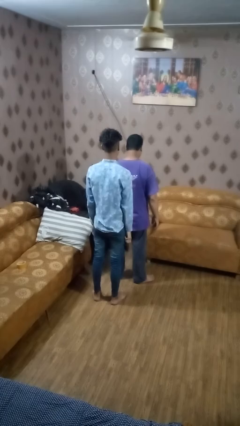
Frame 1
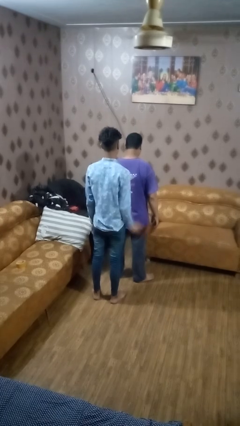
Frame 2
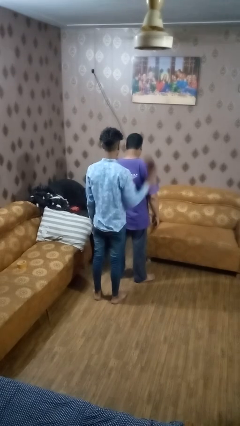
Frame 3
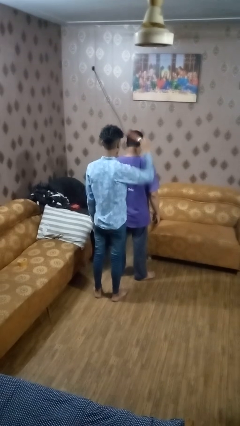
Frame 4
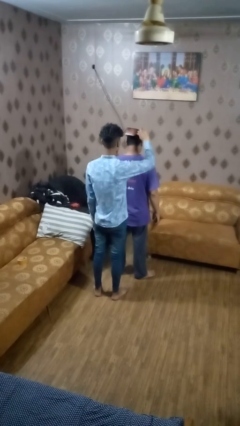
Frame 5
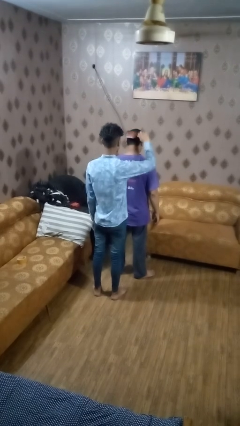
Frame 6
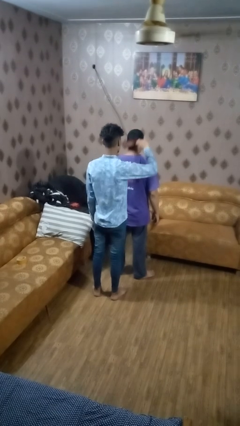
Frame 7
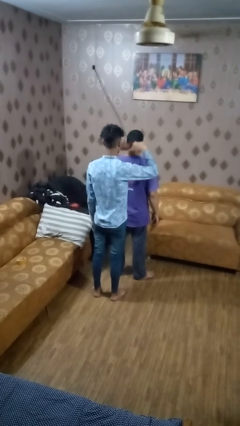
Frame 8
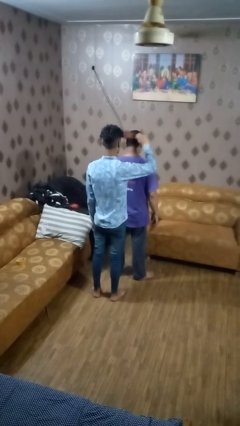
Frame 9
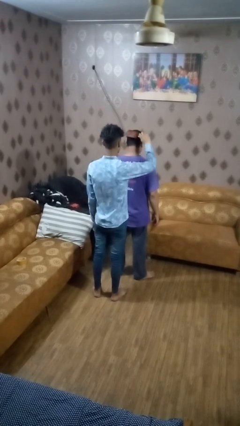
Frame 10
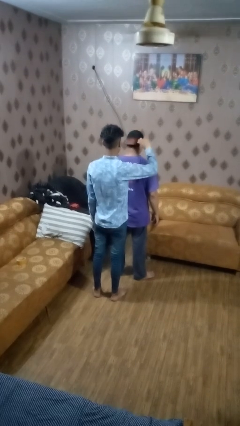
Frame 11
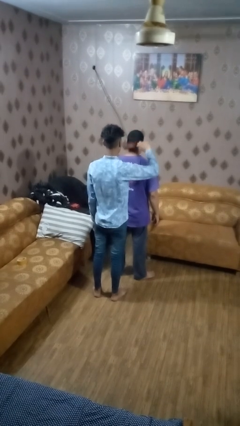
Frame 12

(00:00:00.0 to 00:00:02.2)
person brushes hair of person

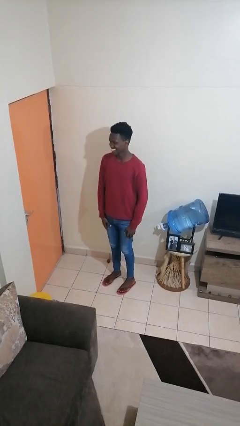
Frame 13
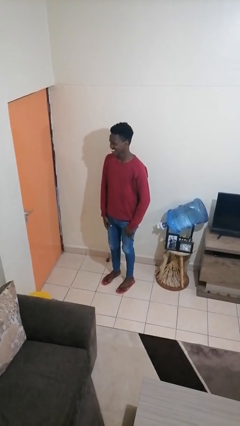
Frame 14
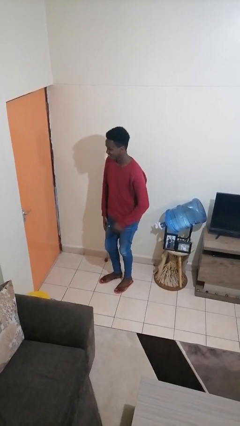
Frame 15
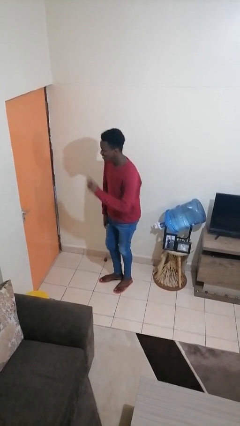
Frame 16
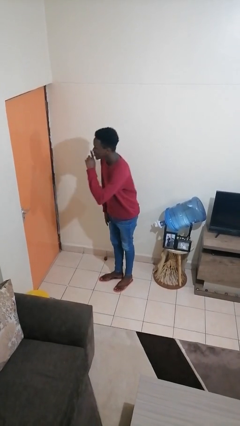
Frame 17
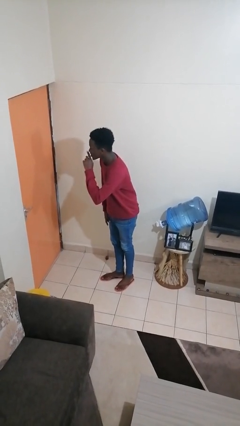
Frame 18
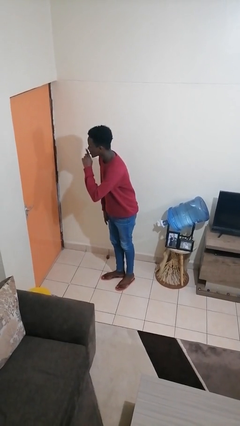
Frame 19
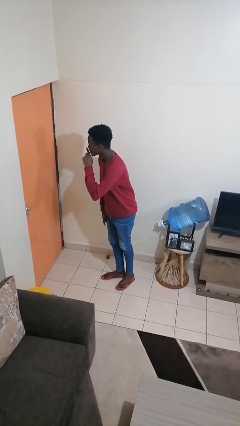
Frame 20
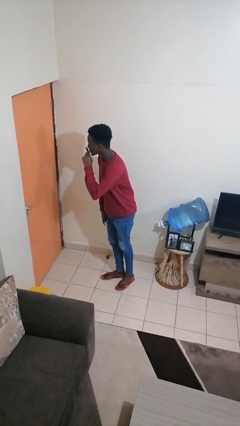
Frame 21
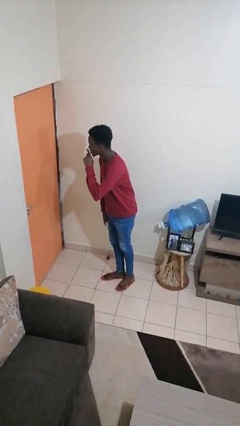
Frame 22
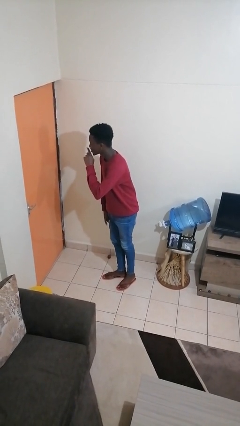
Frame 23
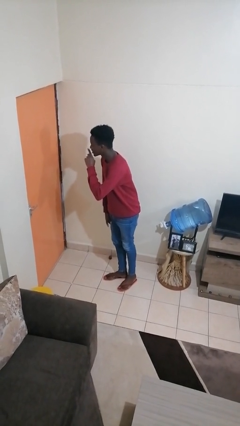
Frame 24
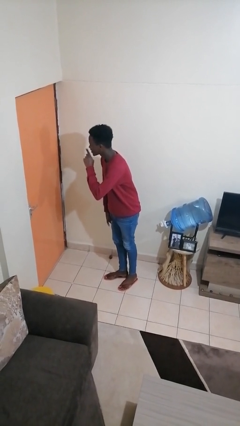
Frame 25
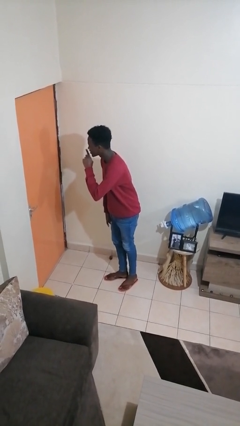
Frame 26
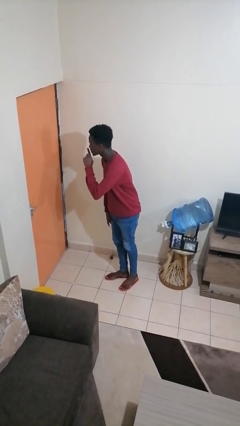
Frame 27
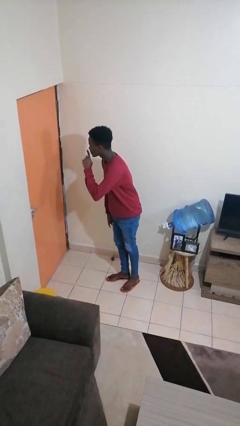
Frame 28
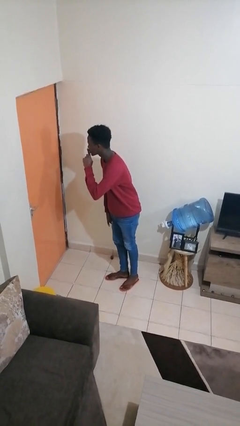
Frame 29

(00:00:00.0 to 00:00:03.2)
person gestures be quiet

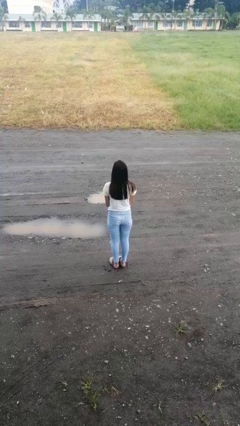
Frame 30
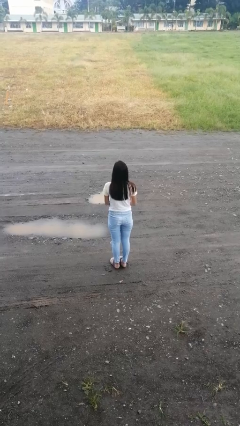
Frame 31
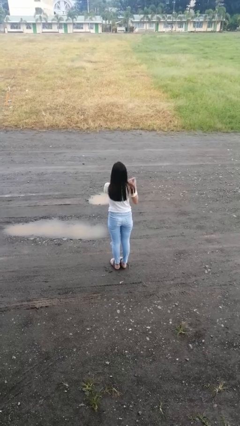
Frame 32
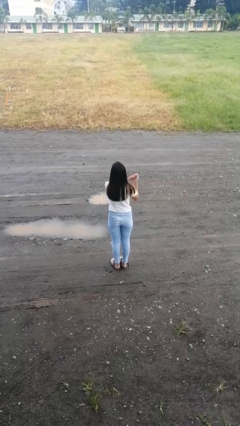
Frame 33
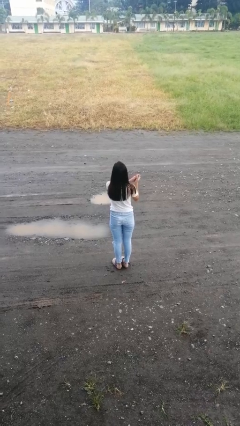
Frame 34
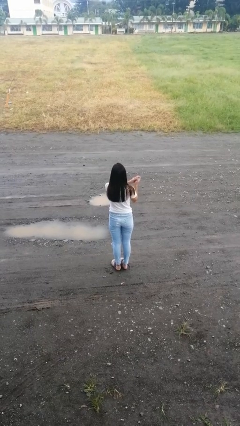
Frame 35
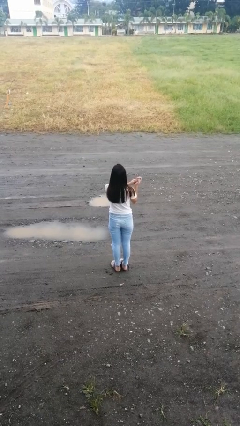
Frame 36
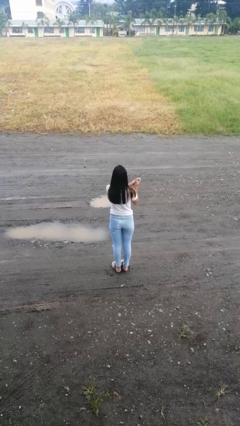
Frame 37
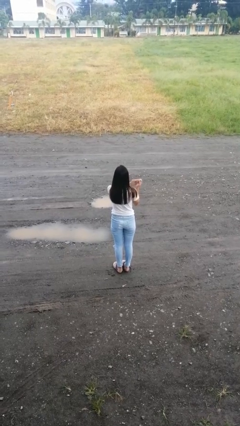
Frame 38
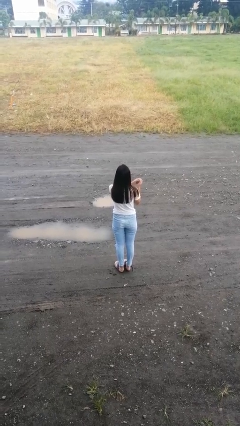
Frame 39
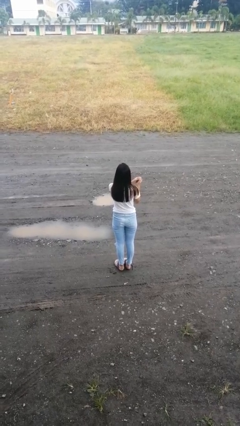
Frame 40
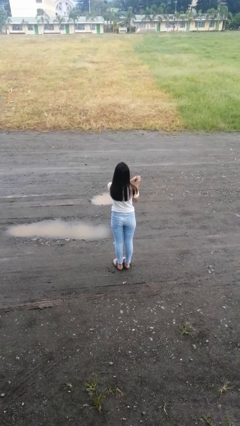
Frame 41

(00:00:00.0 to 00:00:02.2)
person cracks knuckles

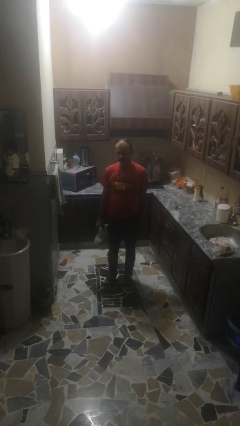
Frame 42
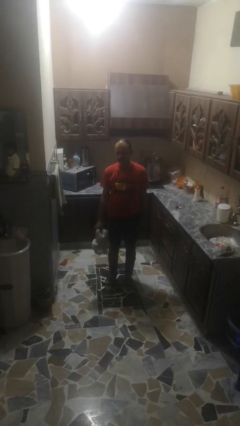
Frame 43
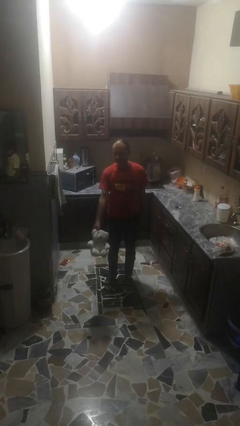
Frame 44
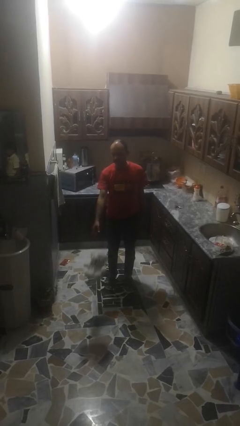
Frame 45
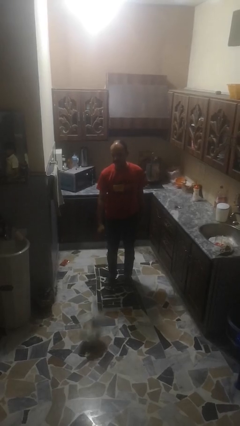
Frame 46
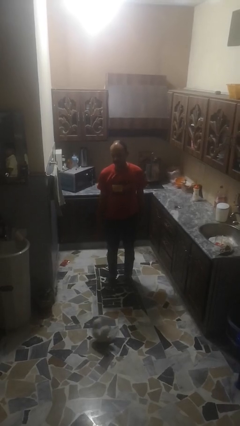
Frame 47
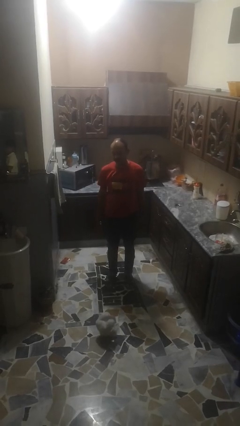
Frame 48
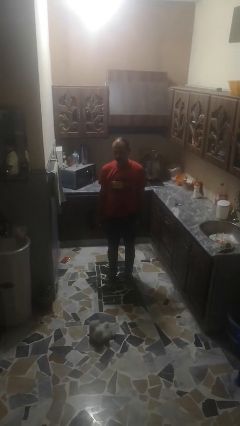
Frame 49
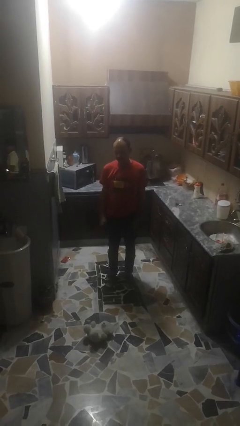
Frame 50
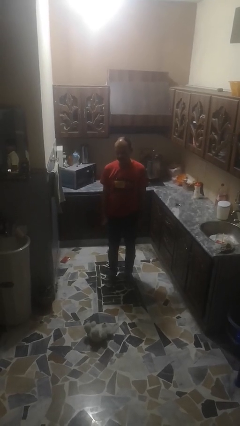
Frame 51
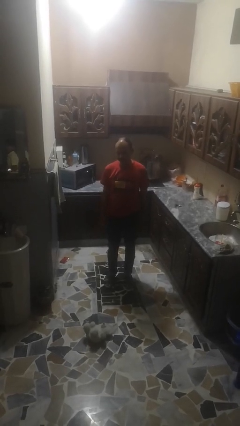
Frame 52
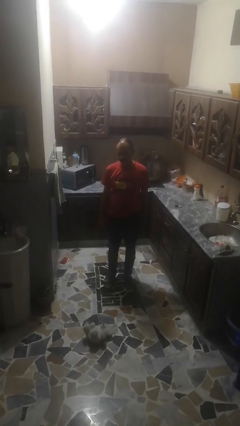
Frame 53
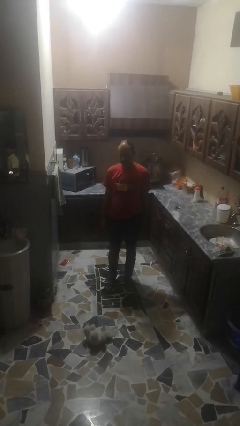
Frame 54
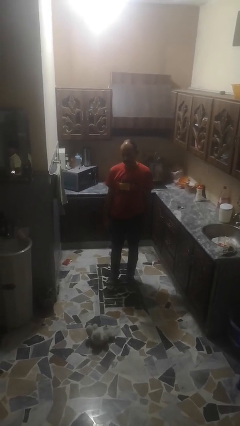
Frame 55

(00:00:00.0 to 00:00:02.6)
person throws object to ground

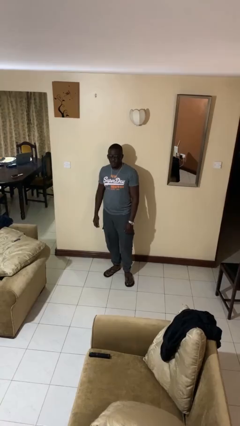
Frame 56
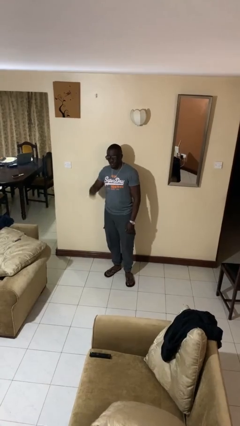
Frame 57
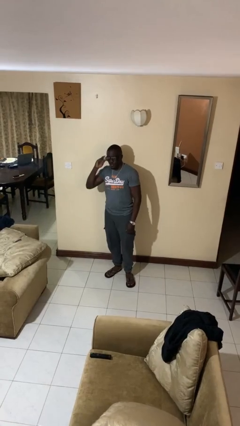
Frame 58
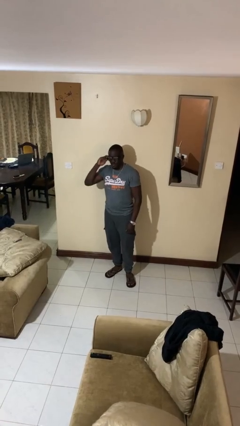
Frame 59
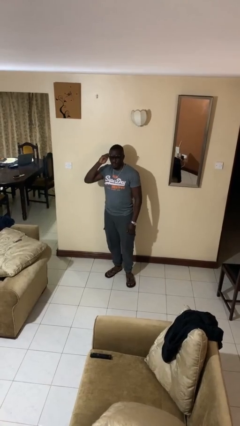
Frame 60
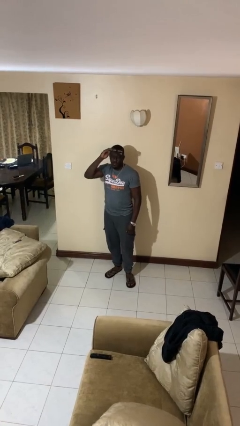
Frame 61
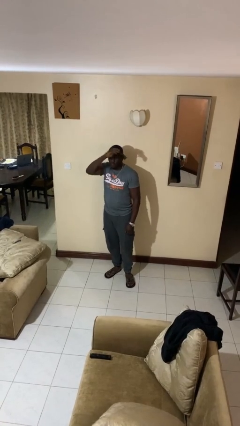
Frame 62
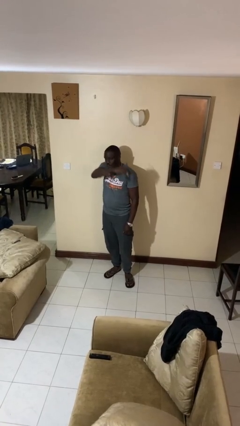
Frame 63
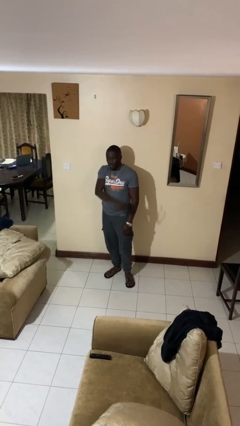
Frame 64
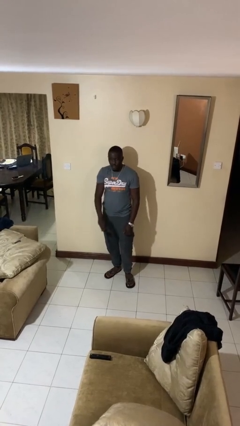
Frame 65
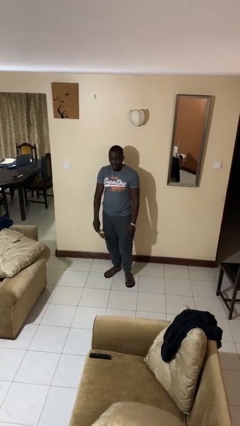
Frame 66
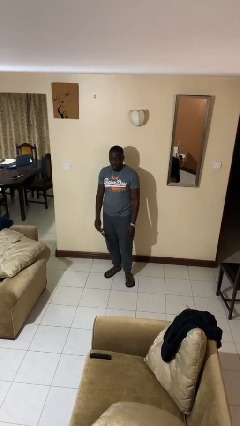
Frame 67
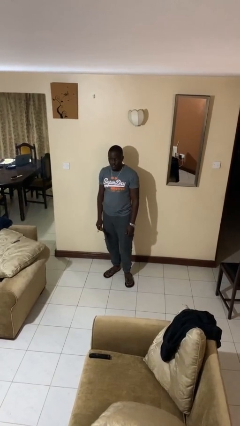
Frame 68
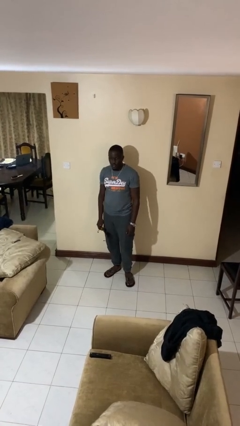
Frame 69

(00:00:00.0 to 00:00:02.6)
person takes off sunglasses

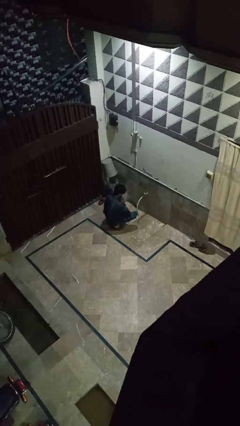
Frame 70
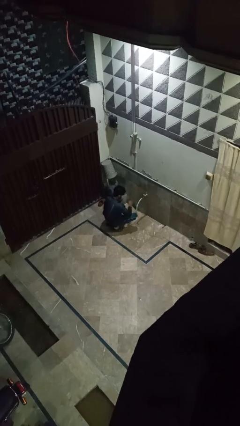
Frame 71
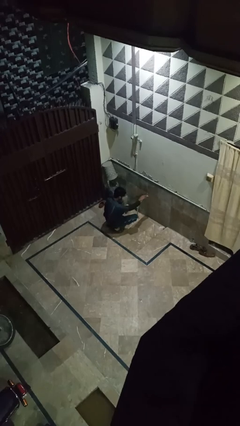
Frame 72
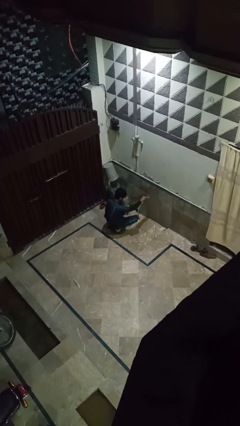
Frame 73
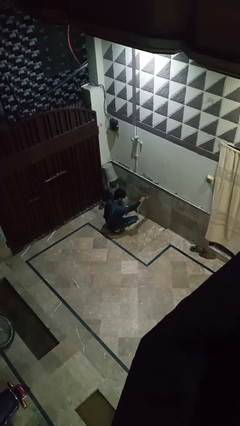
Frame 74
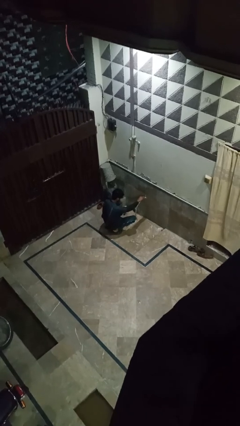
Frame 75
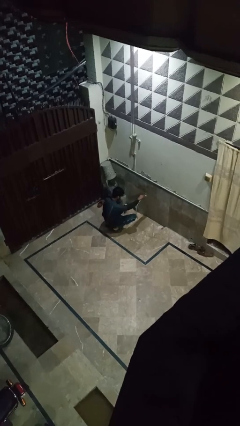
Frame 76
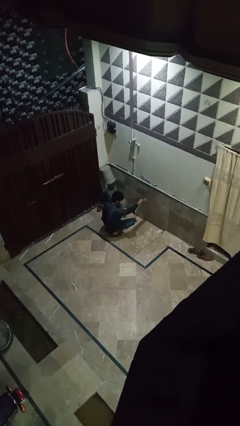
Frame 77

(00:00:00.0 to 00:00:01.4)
person turns on faucet

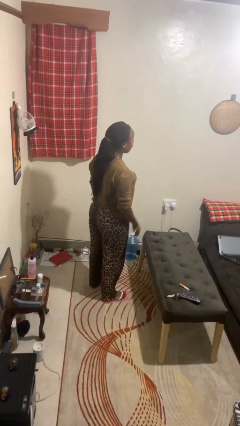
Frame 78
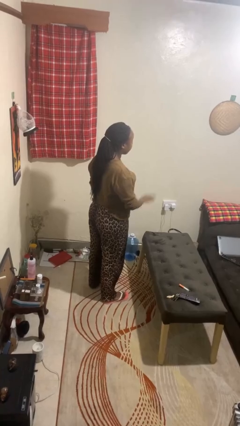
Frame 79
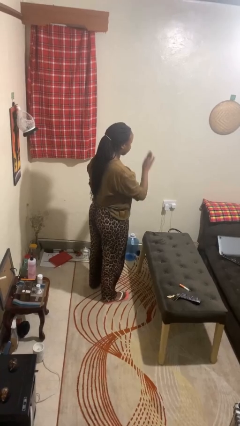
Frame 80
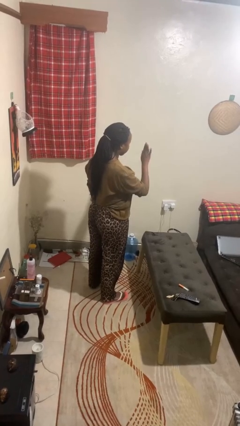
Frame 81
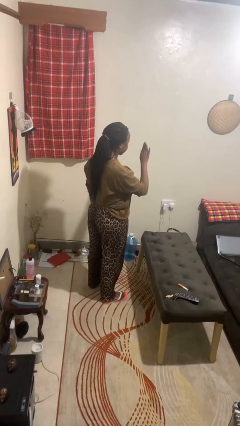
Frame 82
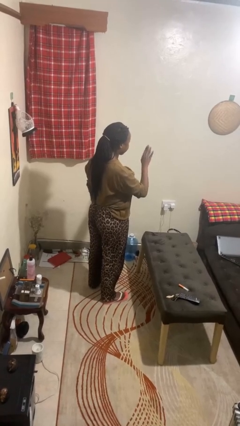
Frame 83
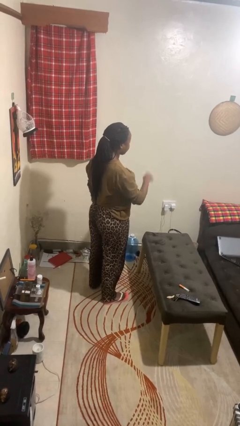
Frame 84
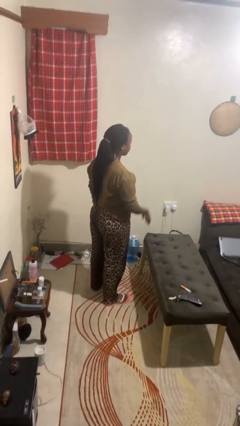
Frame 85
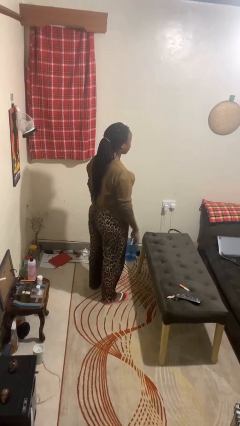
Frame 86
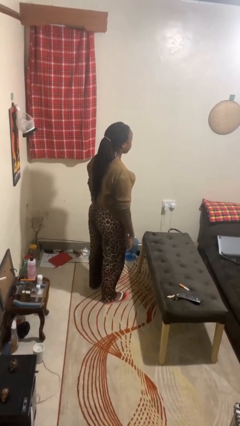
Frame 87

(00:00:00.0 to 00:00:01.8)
person gestures stop

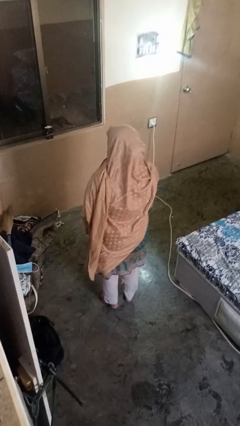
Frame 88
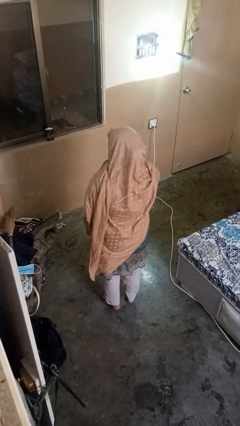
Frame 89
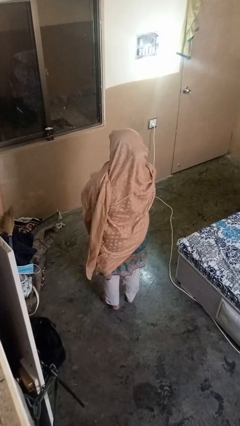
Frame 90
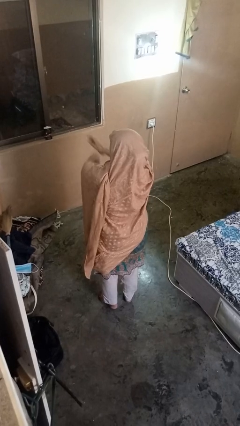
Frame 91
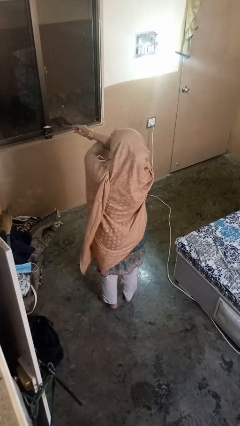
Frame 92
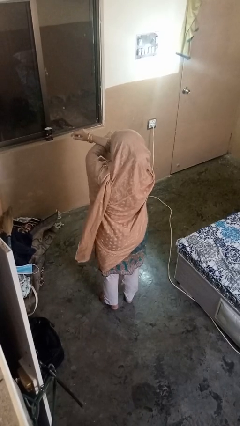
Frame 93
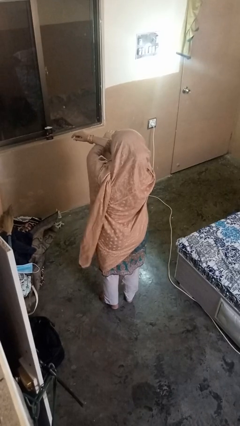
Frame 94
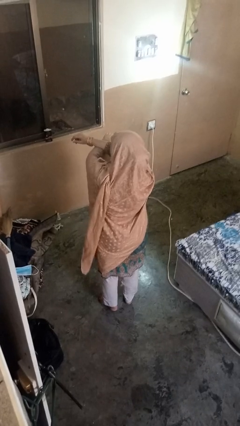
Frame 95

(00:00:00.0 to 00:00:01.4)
person crosses arms
